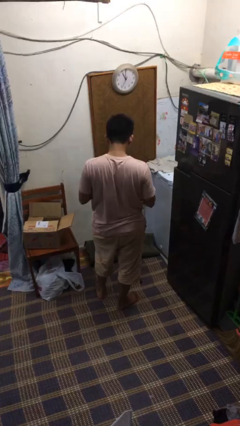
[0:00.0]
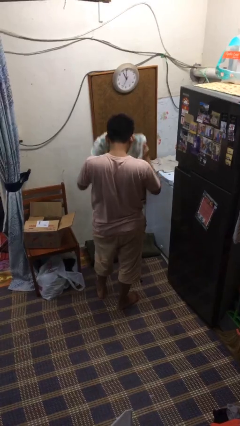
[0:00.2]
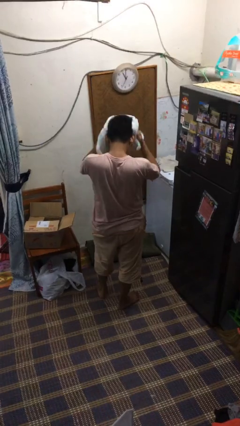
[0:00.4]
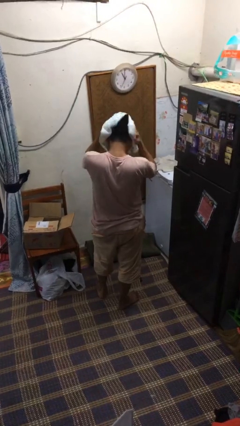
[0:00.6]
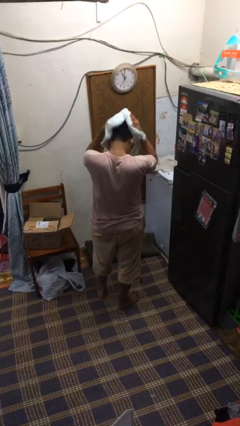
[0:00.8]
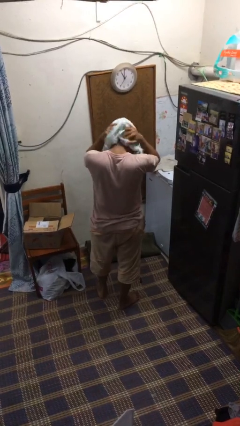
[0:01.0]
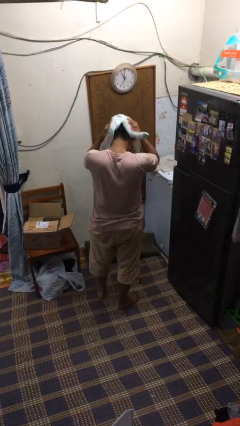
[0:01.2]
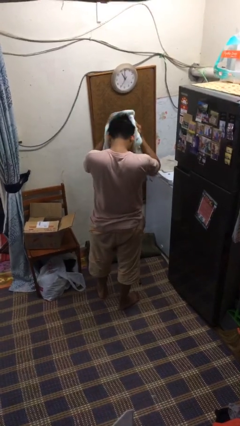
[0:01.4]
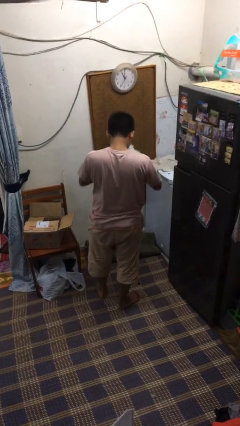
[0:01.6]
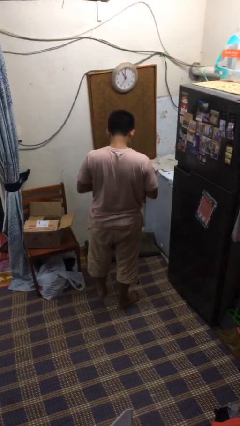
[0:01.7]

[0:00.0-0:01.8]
person dries hair with towel

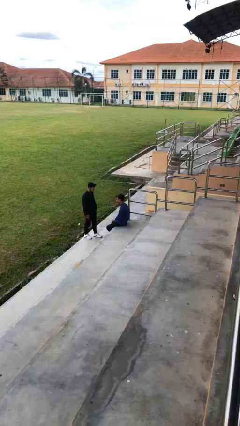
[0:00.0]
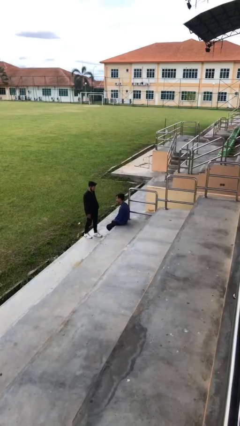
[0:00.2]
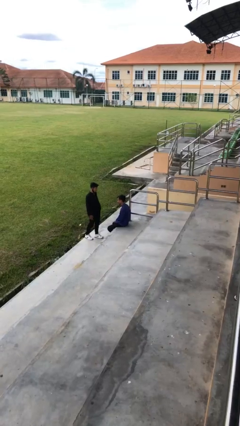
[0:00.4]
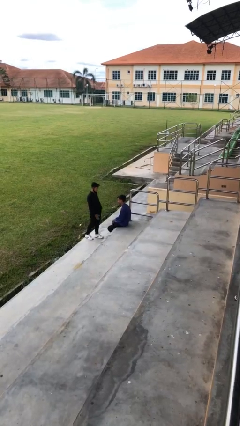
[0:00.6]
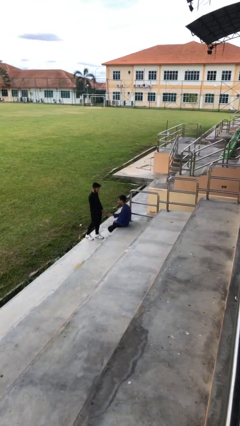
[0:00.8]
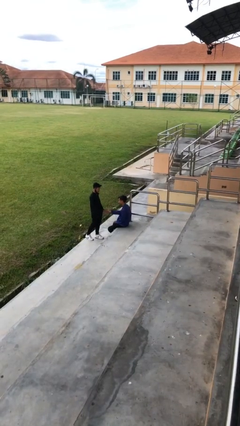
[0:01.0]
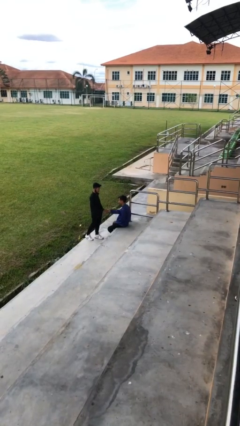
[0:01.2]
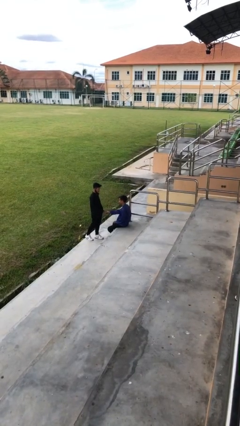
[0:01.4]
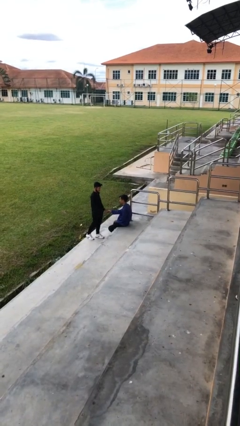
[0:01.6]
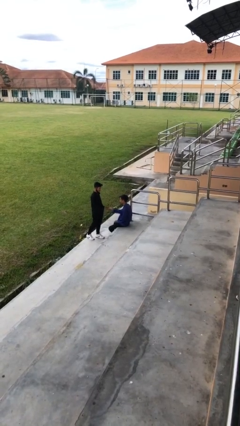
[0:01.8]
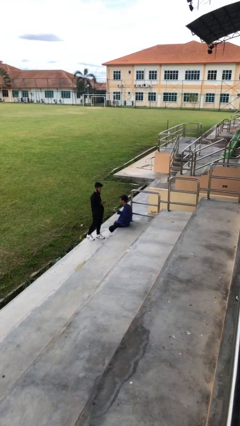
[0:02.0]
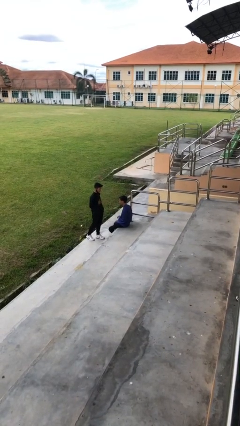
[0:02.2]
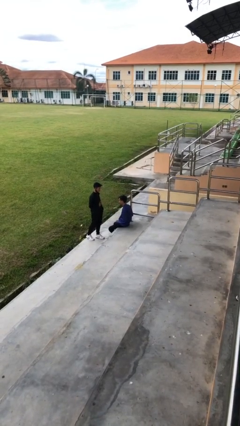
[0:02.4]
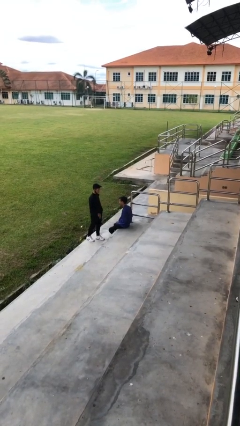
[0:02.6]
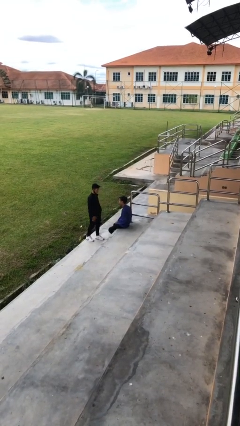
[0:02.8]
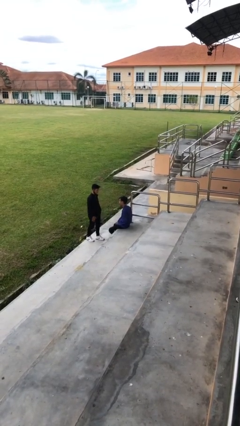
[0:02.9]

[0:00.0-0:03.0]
person shakes hand

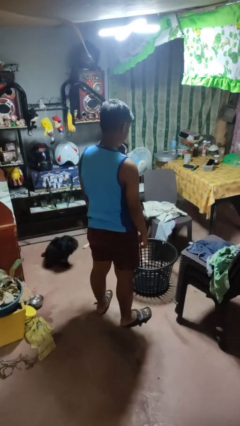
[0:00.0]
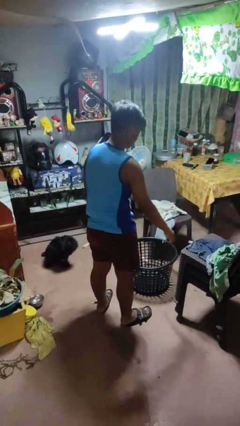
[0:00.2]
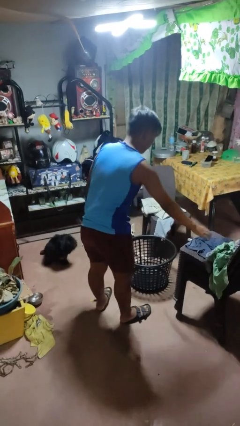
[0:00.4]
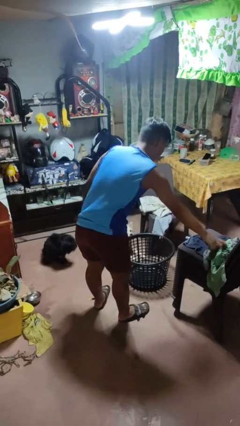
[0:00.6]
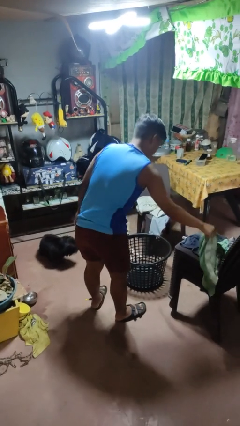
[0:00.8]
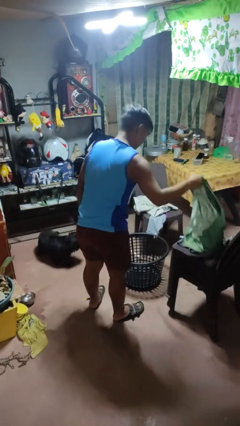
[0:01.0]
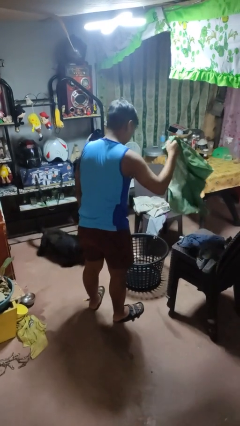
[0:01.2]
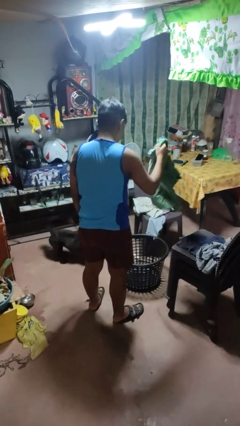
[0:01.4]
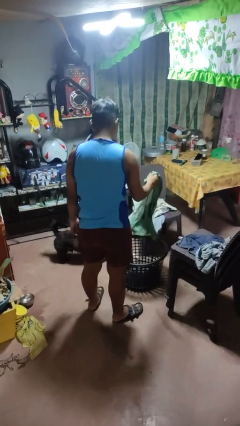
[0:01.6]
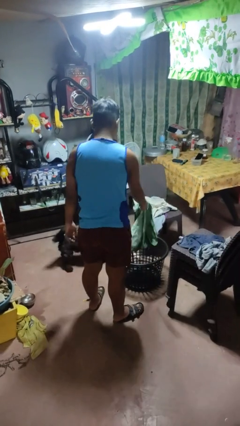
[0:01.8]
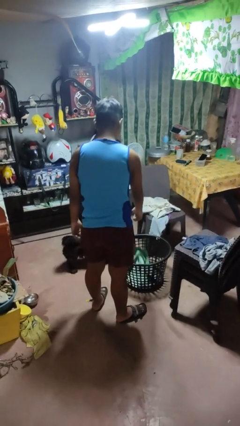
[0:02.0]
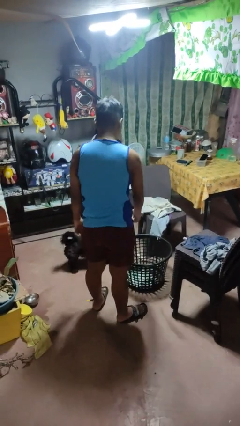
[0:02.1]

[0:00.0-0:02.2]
person puts object into basket

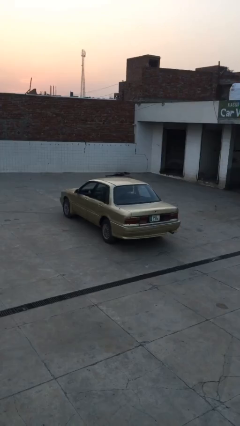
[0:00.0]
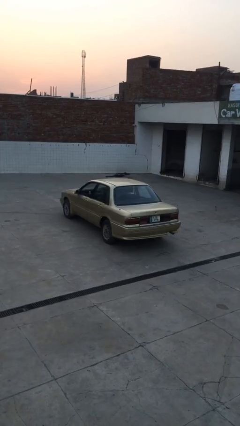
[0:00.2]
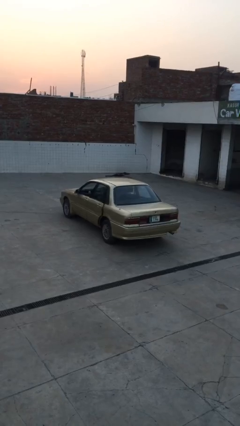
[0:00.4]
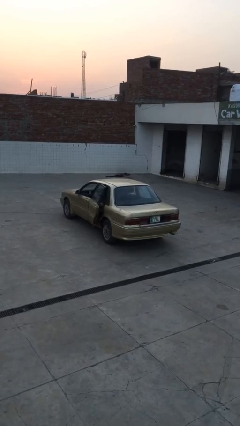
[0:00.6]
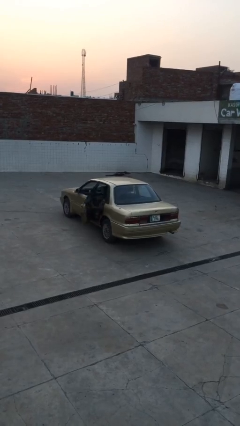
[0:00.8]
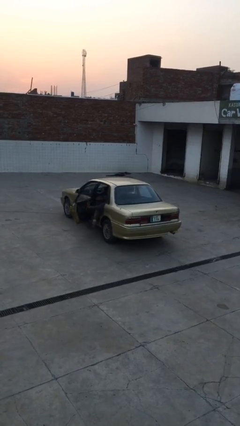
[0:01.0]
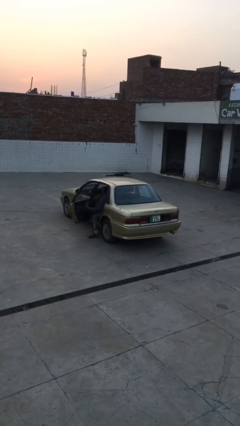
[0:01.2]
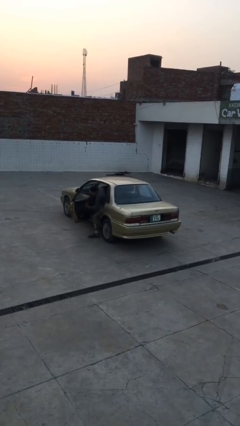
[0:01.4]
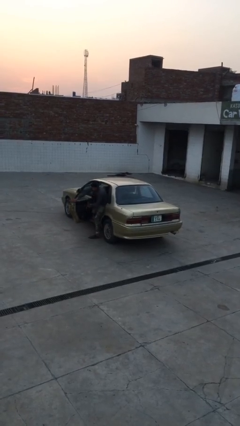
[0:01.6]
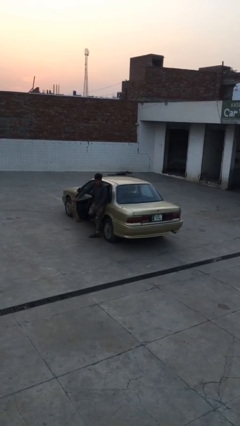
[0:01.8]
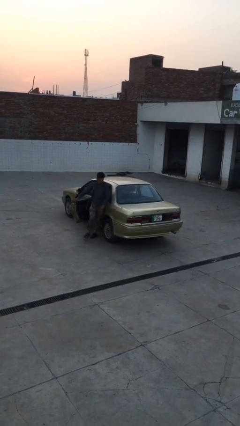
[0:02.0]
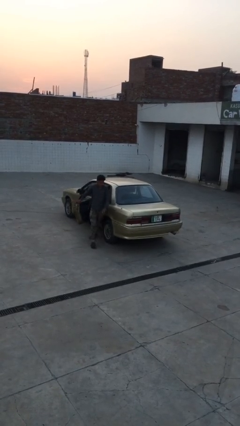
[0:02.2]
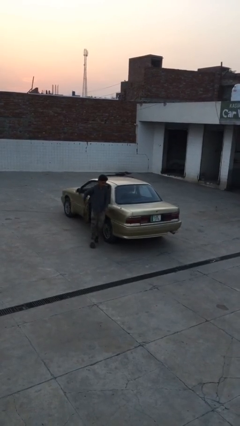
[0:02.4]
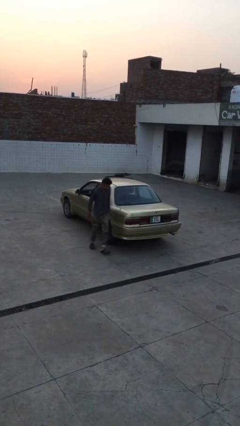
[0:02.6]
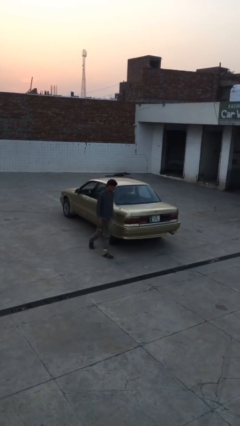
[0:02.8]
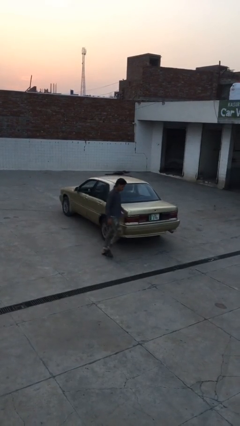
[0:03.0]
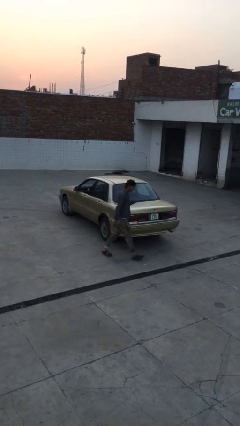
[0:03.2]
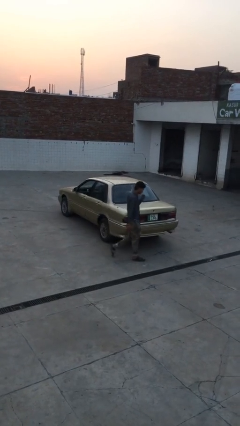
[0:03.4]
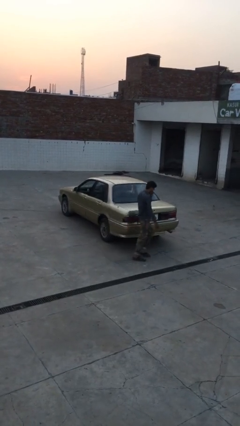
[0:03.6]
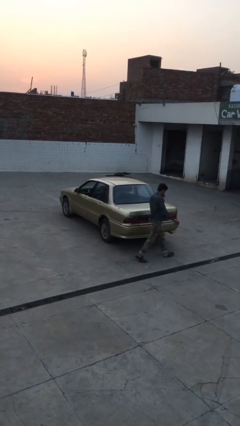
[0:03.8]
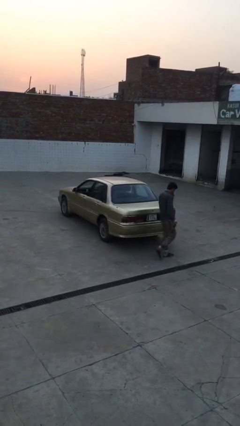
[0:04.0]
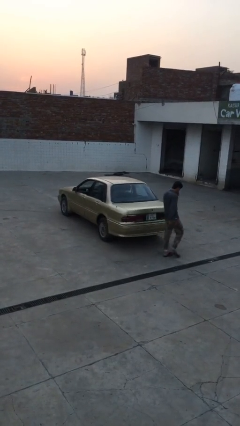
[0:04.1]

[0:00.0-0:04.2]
car drops off person

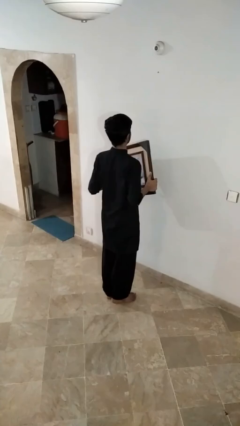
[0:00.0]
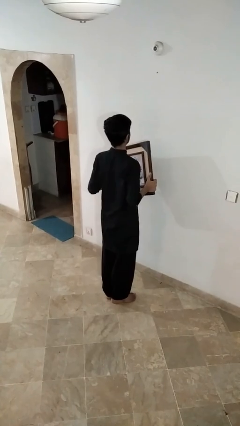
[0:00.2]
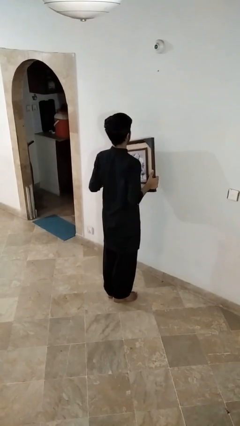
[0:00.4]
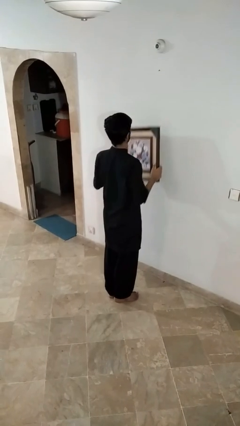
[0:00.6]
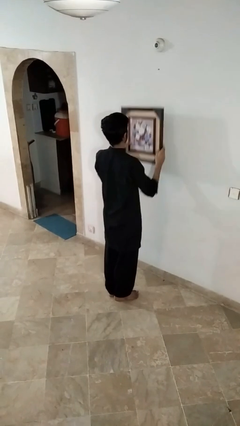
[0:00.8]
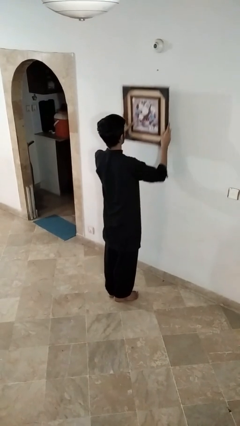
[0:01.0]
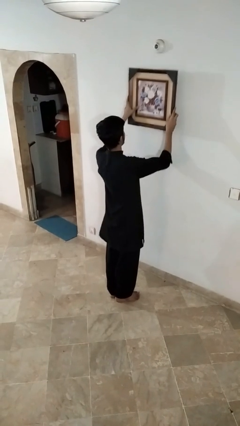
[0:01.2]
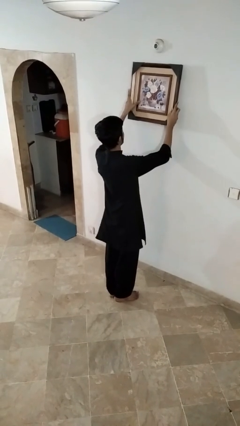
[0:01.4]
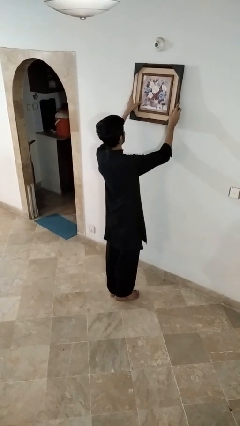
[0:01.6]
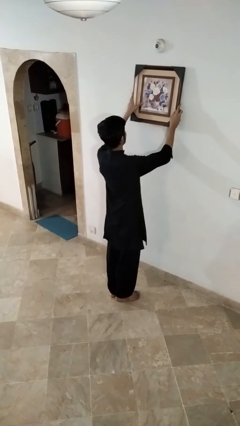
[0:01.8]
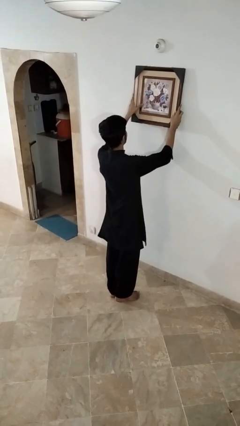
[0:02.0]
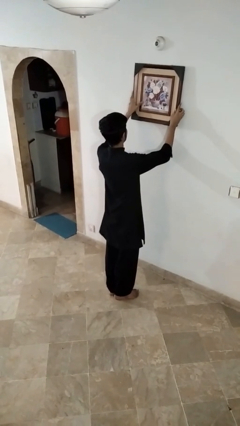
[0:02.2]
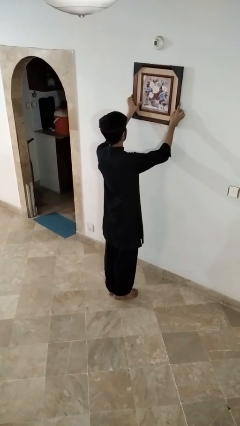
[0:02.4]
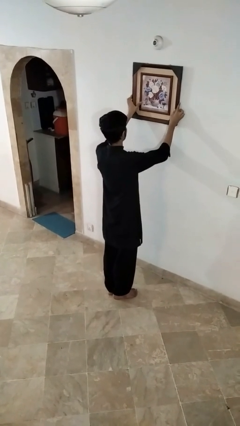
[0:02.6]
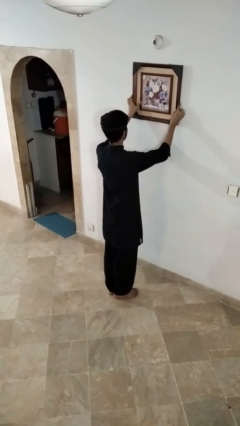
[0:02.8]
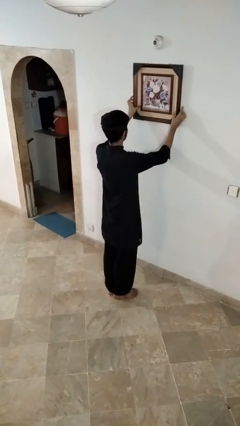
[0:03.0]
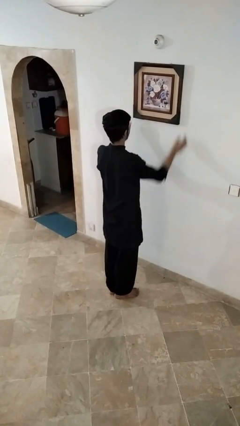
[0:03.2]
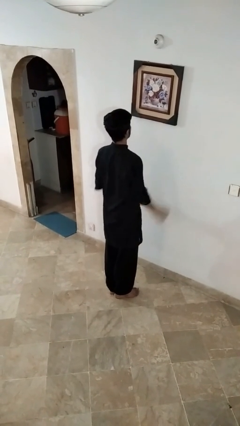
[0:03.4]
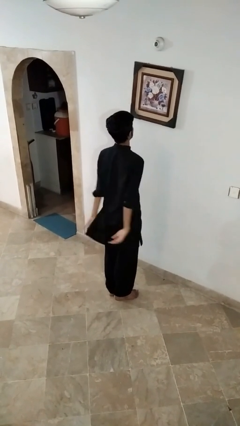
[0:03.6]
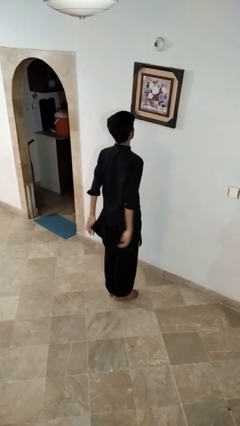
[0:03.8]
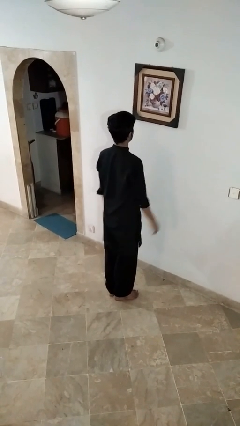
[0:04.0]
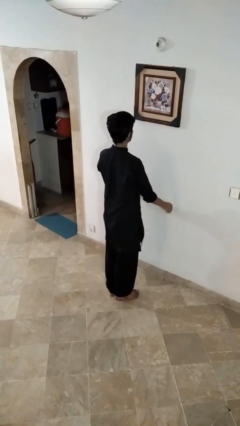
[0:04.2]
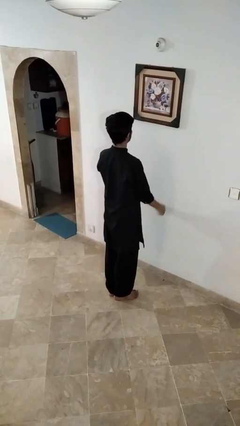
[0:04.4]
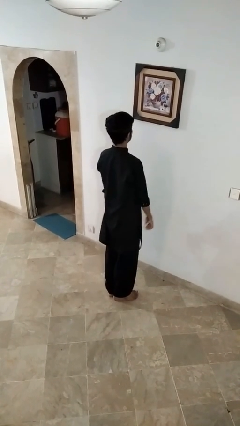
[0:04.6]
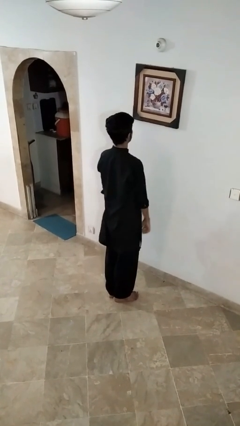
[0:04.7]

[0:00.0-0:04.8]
person puts up picture frame

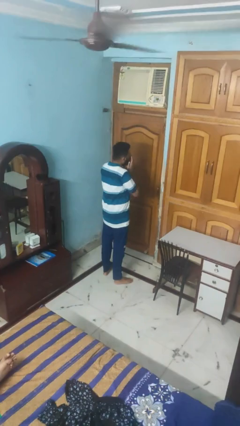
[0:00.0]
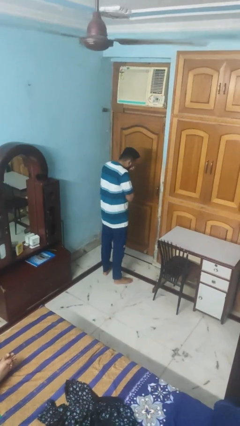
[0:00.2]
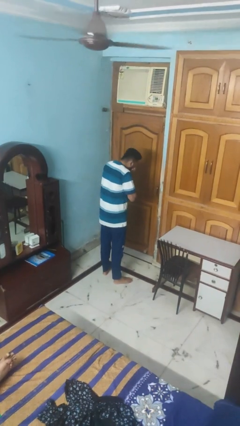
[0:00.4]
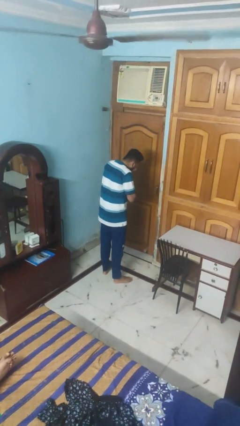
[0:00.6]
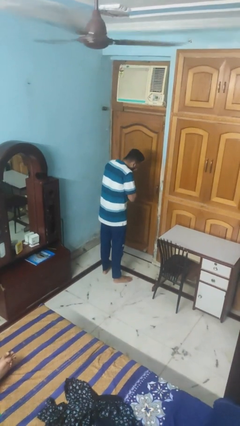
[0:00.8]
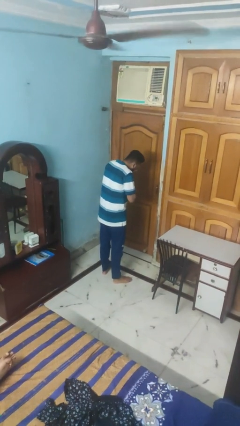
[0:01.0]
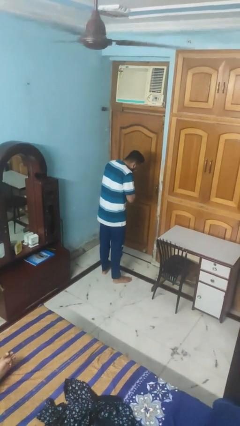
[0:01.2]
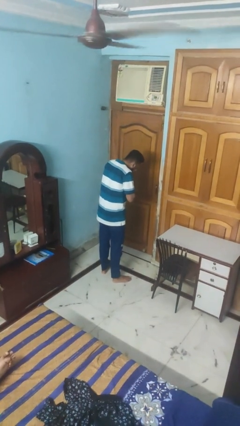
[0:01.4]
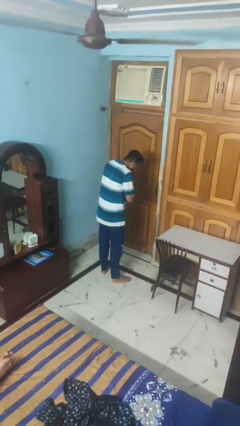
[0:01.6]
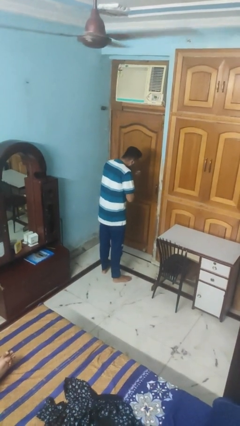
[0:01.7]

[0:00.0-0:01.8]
person sneezes into hand
